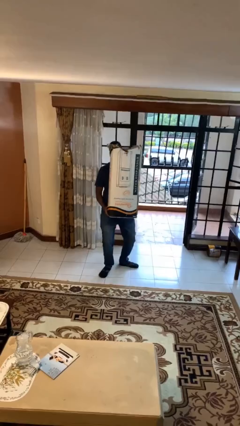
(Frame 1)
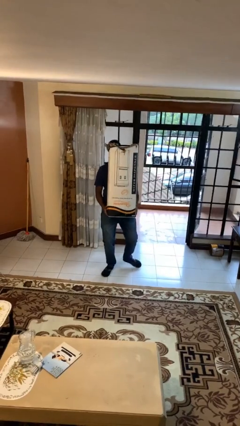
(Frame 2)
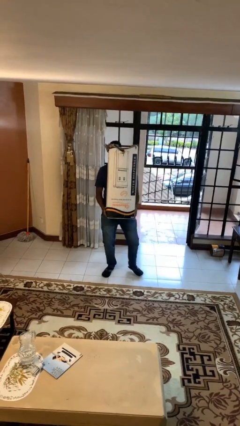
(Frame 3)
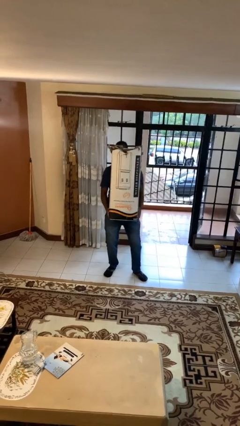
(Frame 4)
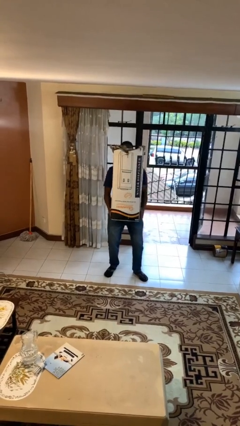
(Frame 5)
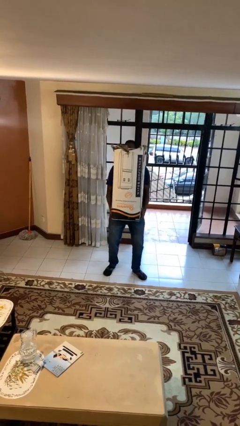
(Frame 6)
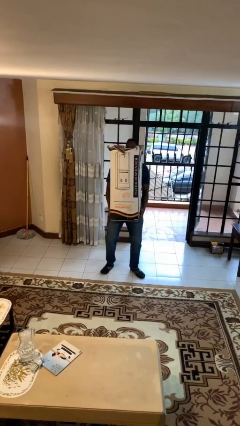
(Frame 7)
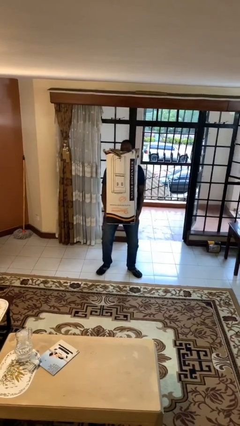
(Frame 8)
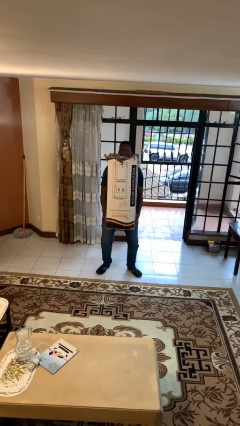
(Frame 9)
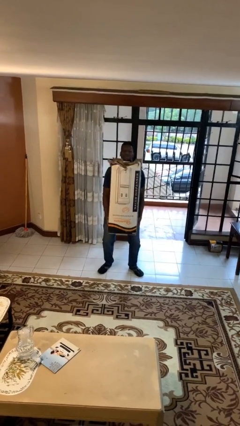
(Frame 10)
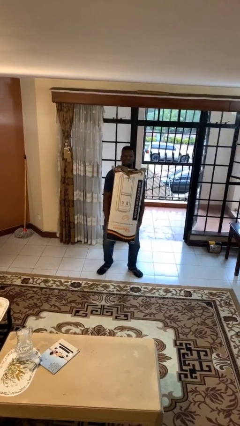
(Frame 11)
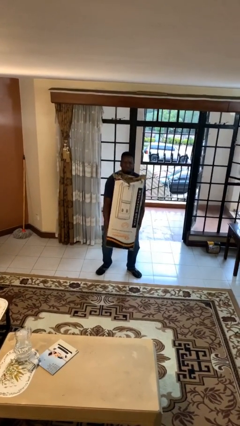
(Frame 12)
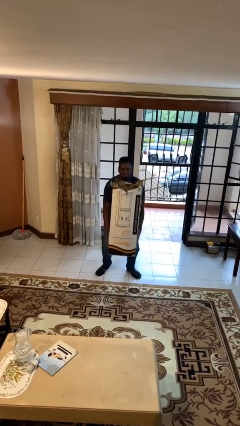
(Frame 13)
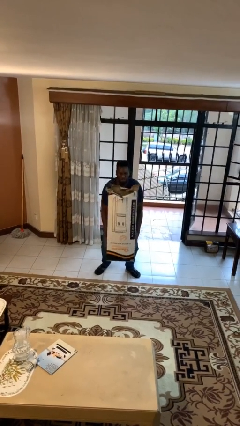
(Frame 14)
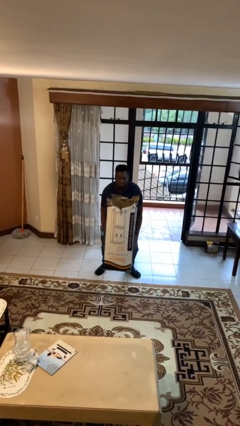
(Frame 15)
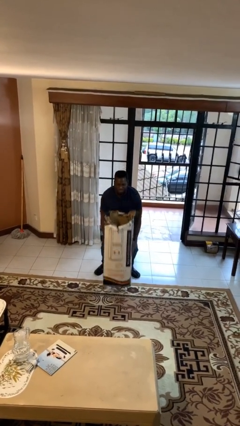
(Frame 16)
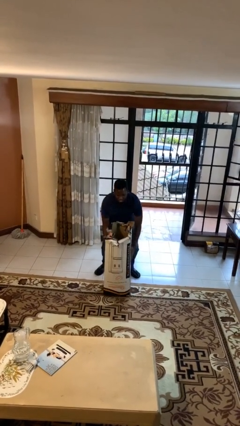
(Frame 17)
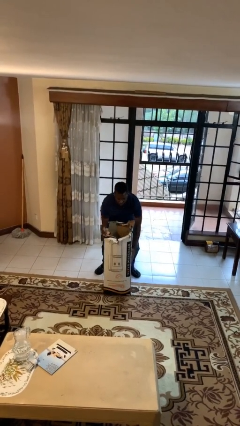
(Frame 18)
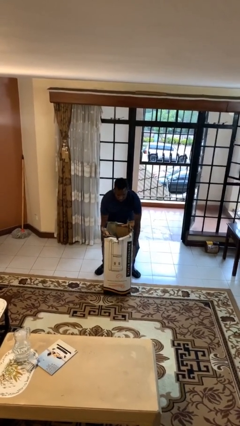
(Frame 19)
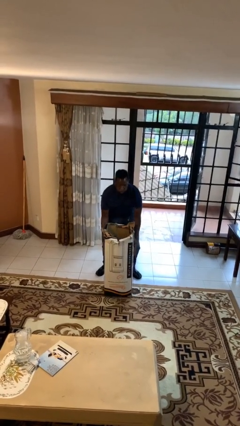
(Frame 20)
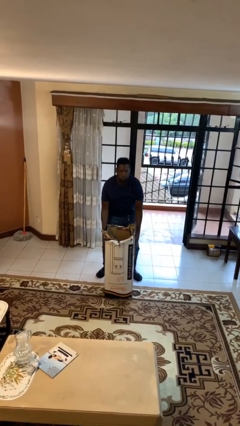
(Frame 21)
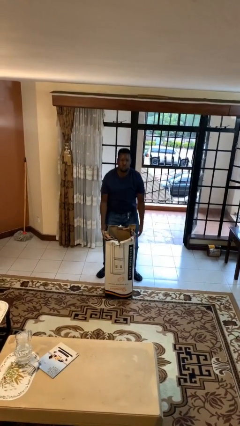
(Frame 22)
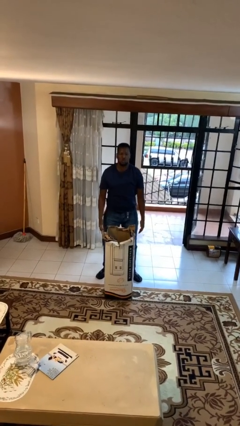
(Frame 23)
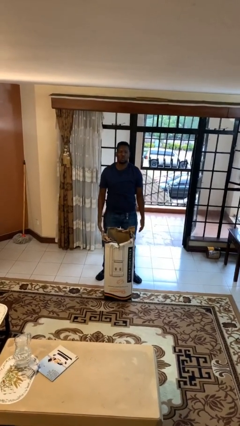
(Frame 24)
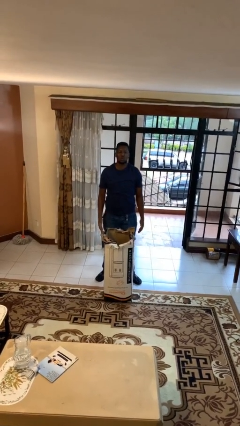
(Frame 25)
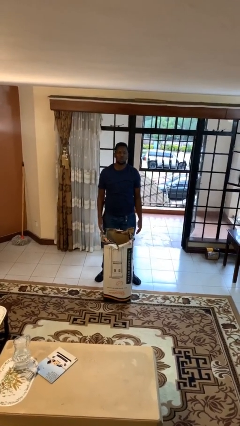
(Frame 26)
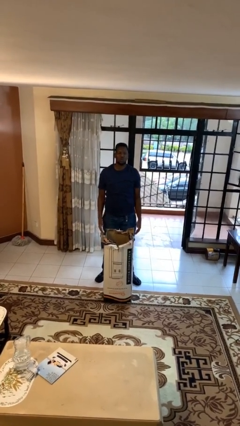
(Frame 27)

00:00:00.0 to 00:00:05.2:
person puts down object on floor

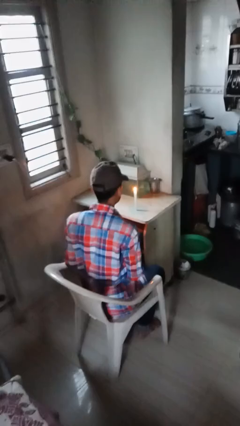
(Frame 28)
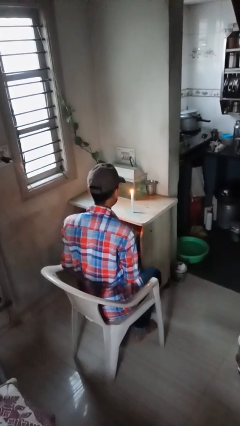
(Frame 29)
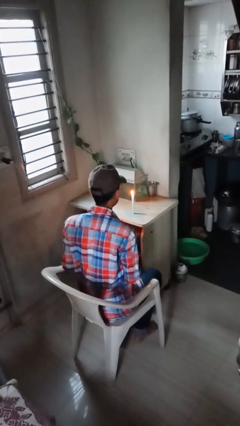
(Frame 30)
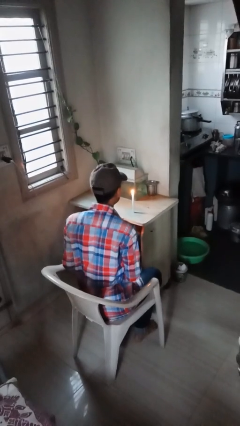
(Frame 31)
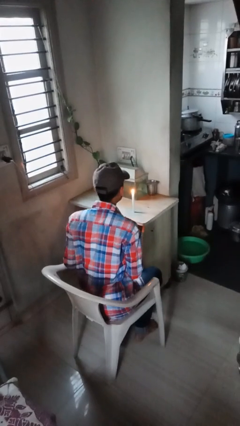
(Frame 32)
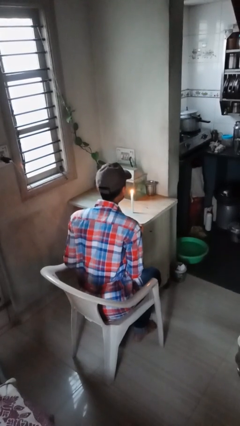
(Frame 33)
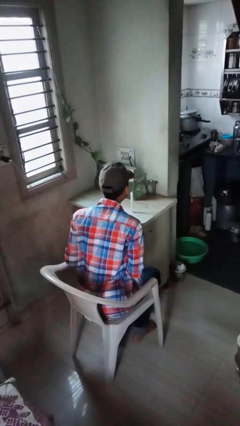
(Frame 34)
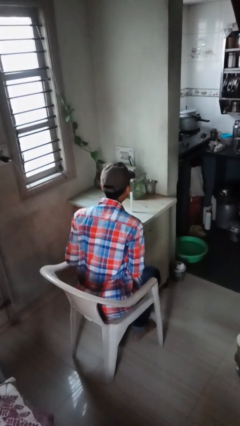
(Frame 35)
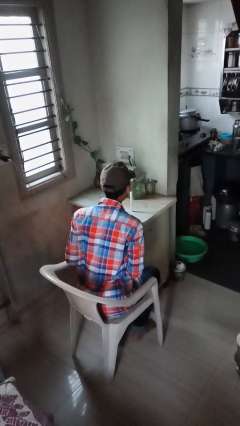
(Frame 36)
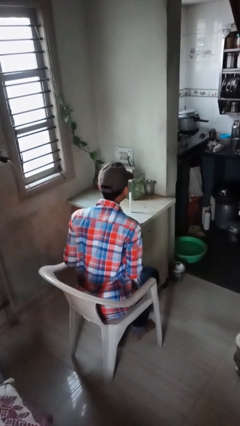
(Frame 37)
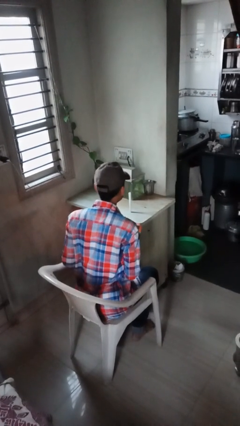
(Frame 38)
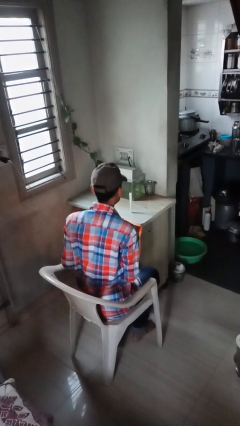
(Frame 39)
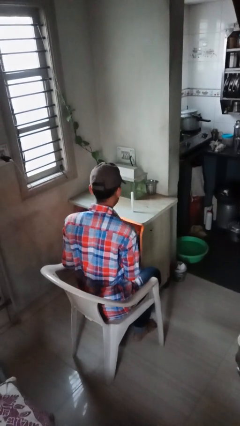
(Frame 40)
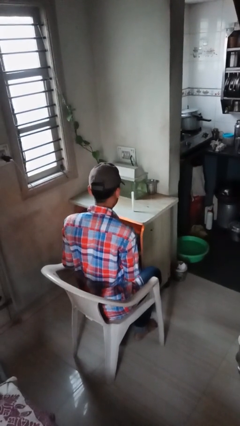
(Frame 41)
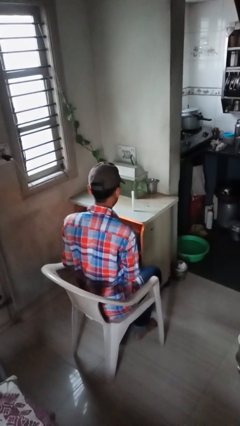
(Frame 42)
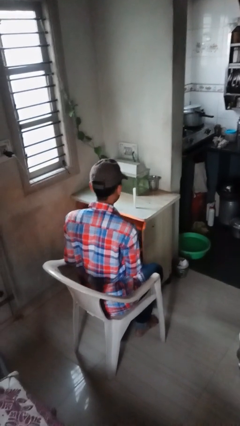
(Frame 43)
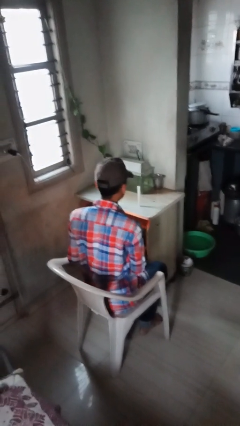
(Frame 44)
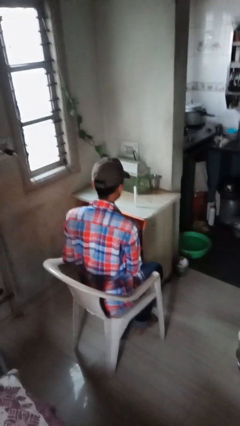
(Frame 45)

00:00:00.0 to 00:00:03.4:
person extinguishes candle

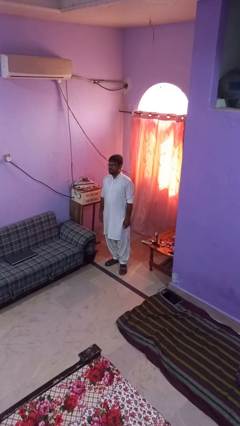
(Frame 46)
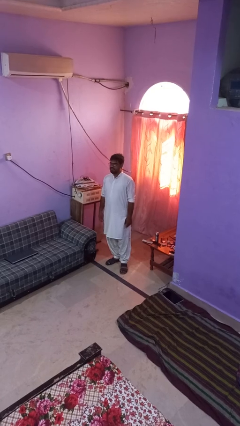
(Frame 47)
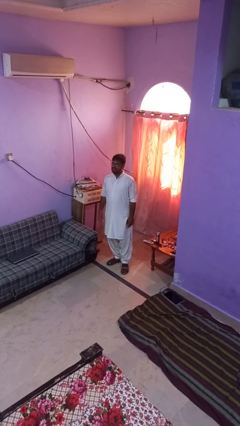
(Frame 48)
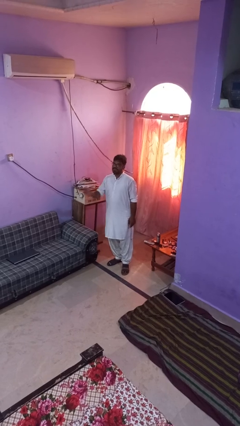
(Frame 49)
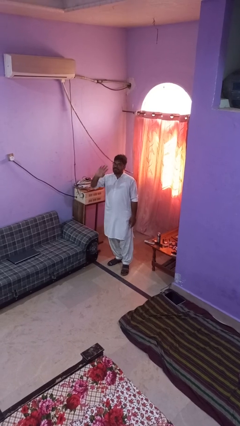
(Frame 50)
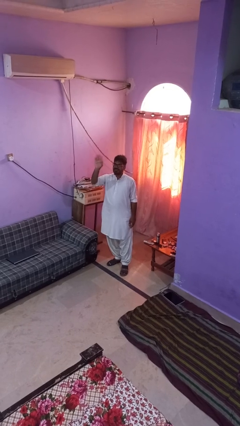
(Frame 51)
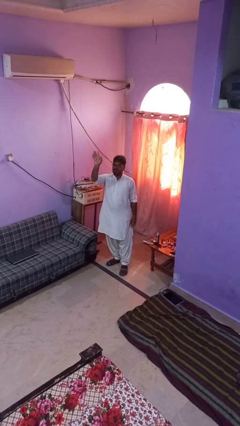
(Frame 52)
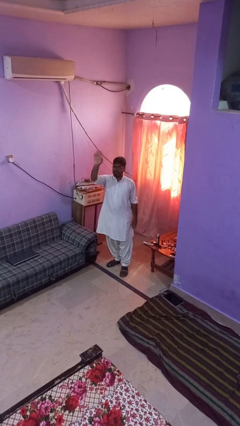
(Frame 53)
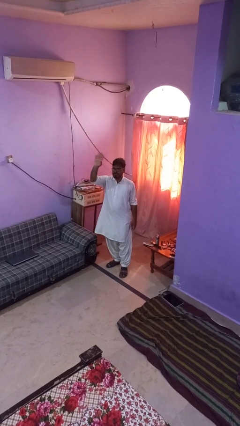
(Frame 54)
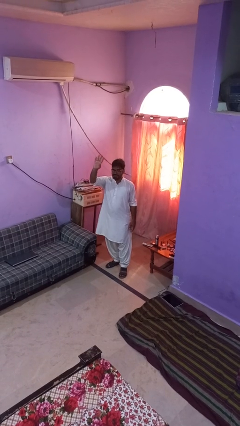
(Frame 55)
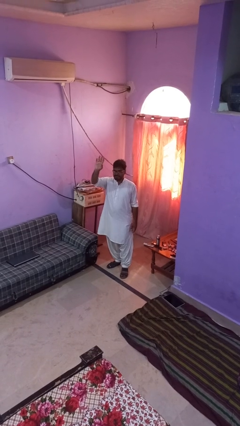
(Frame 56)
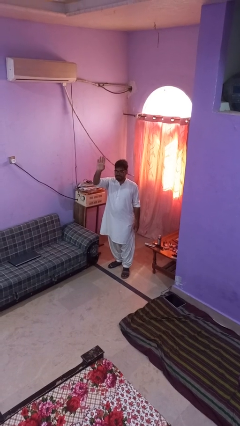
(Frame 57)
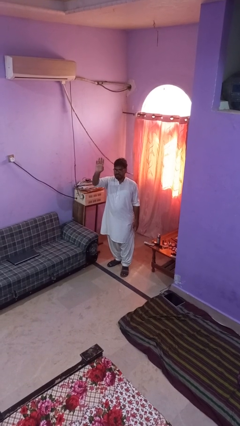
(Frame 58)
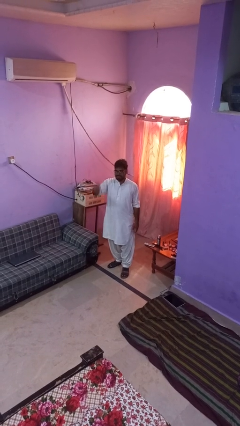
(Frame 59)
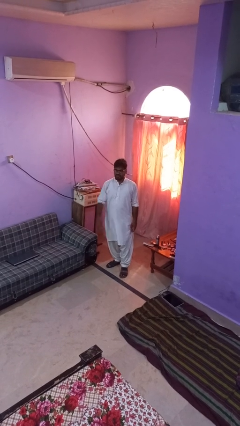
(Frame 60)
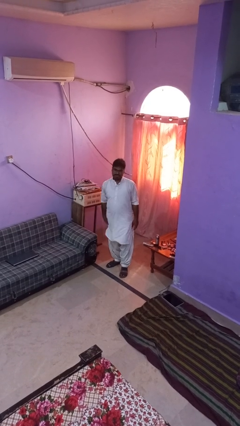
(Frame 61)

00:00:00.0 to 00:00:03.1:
person waves at person

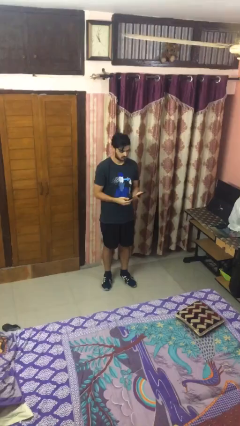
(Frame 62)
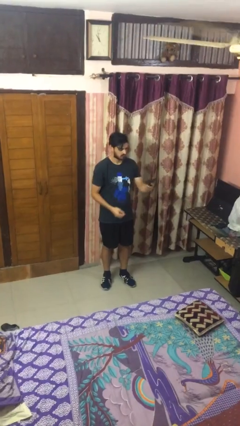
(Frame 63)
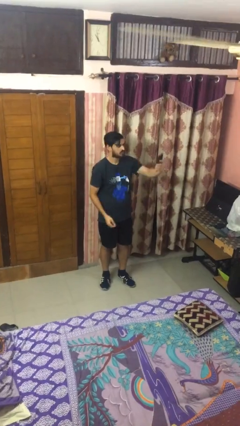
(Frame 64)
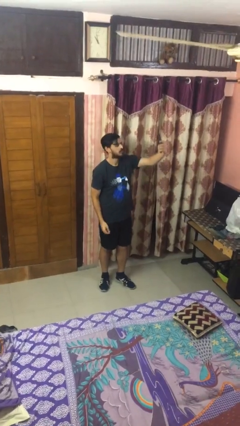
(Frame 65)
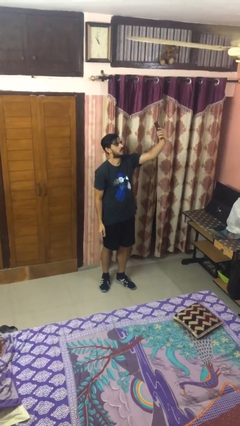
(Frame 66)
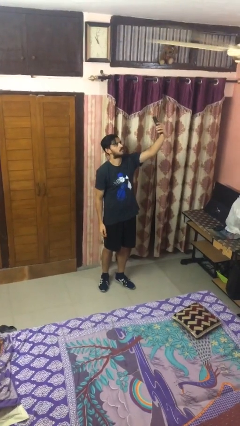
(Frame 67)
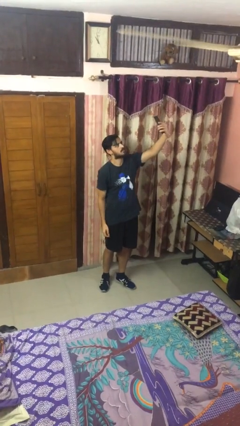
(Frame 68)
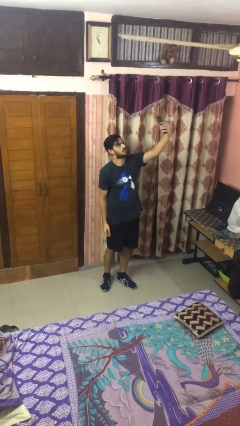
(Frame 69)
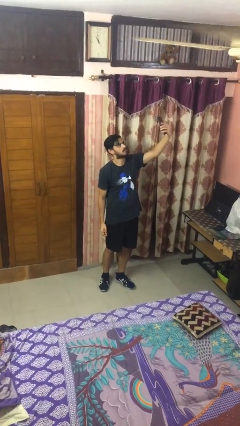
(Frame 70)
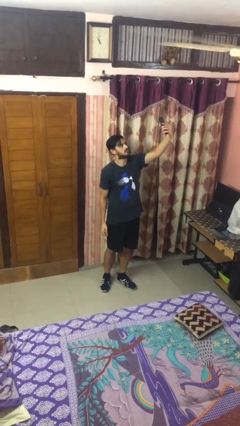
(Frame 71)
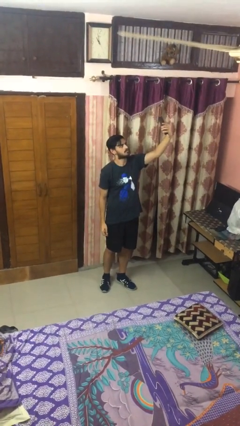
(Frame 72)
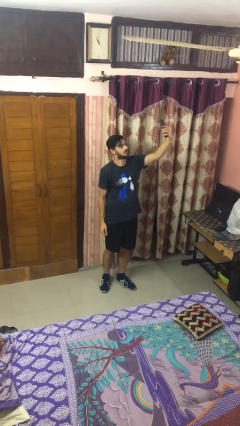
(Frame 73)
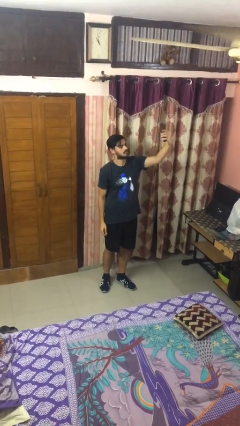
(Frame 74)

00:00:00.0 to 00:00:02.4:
person takes selfie

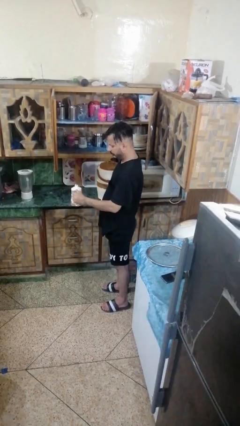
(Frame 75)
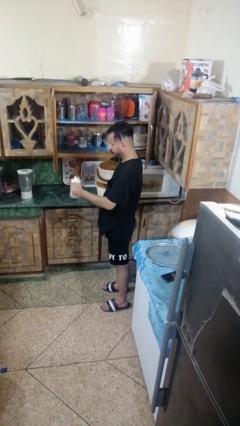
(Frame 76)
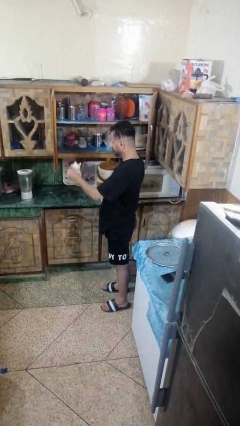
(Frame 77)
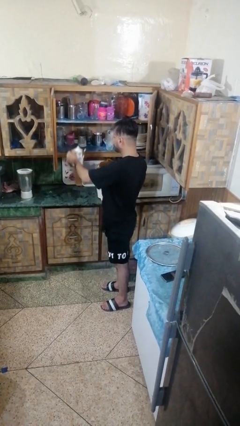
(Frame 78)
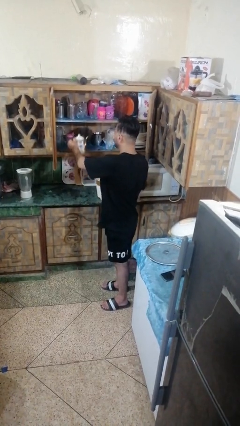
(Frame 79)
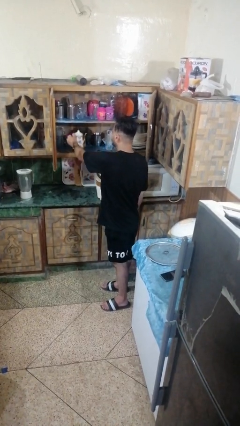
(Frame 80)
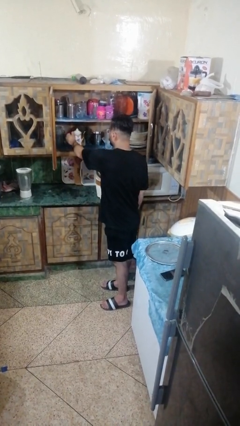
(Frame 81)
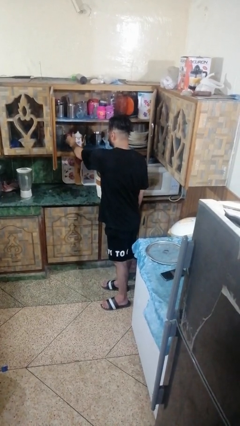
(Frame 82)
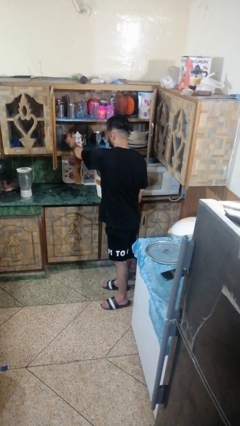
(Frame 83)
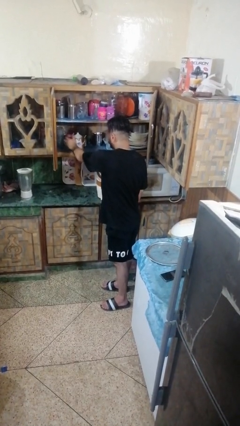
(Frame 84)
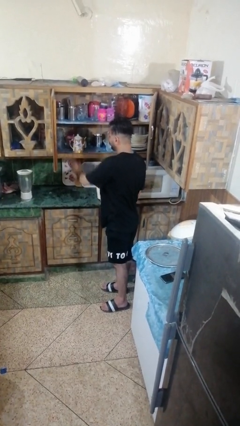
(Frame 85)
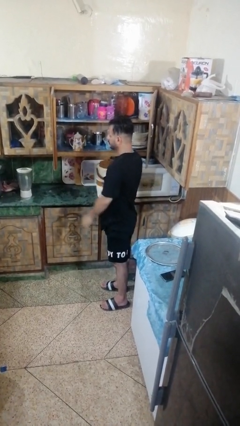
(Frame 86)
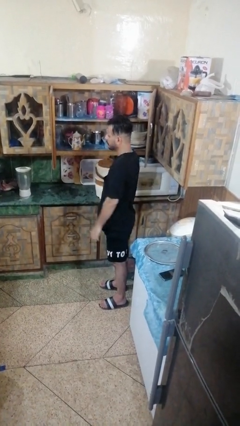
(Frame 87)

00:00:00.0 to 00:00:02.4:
person puts down object into cabinet

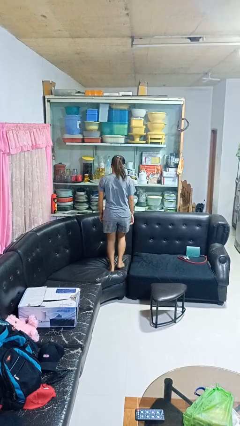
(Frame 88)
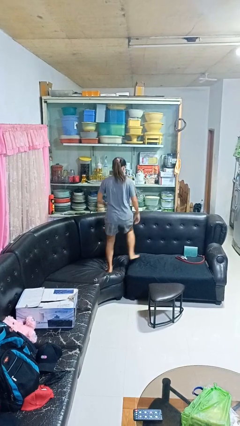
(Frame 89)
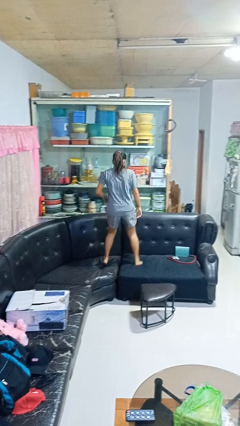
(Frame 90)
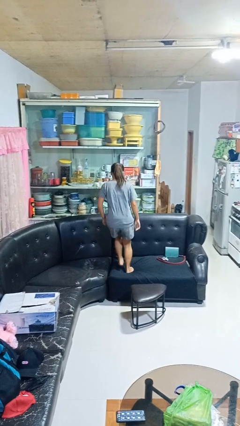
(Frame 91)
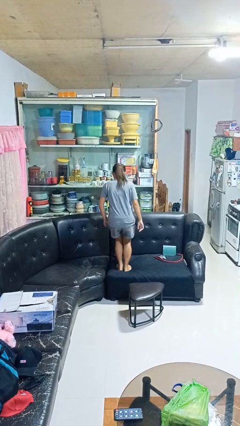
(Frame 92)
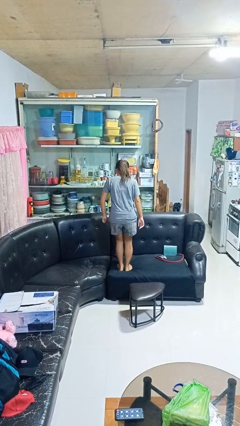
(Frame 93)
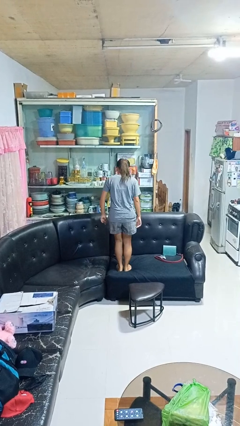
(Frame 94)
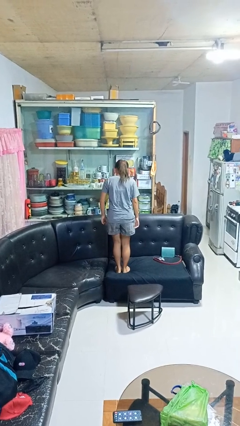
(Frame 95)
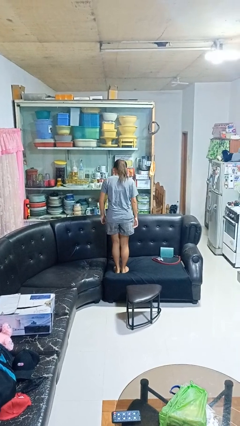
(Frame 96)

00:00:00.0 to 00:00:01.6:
person jumps on couch
